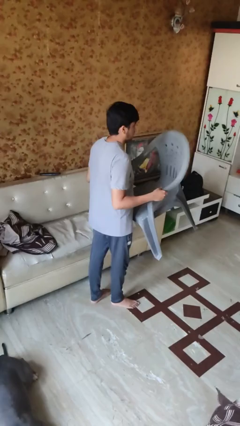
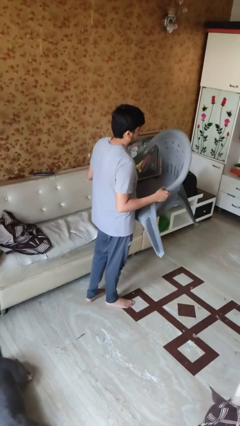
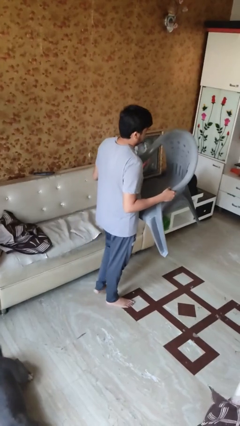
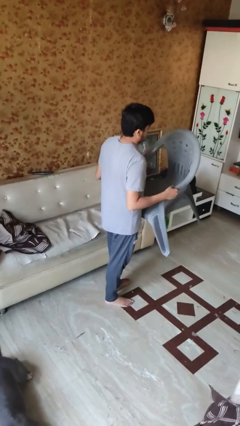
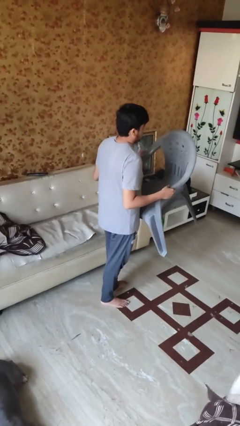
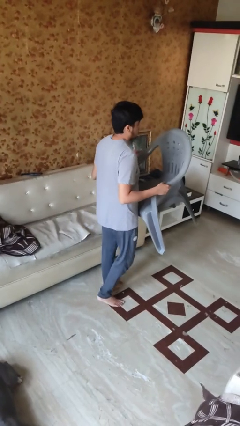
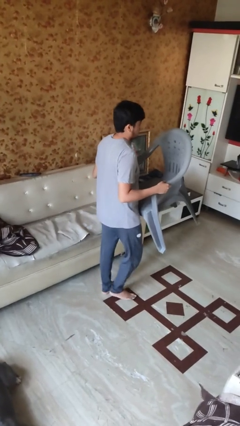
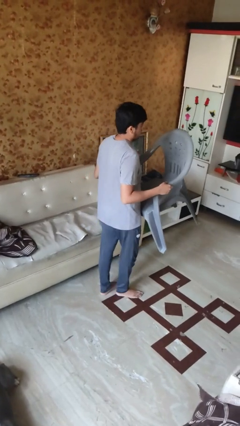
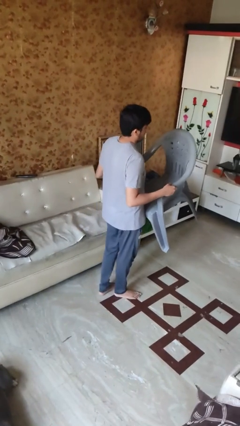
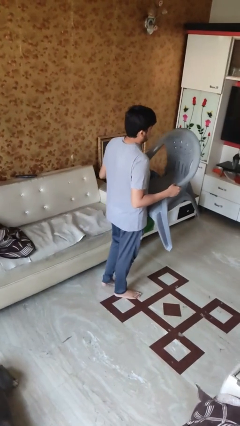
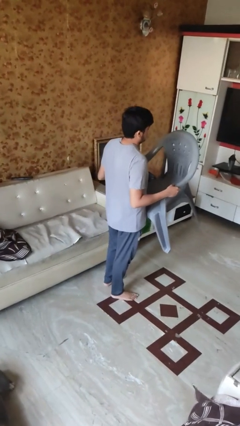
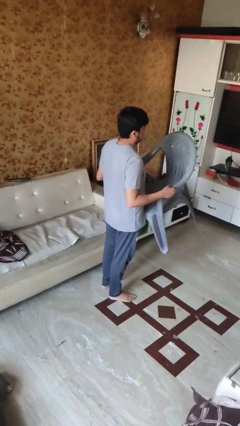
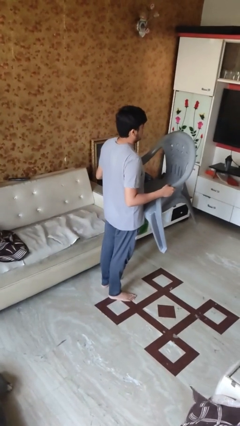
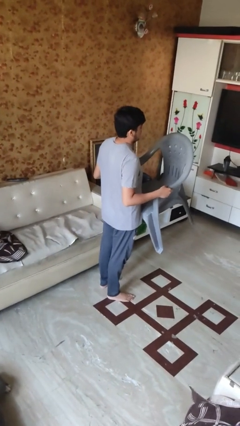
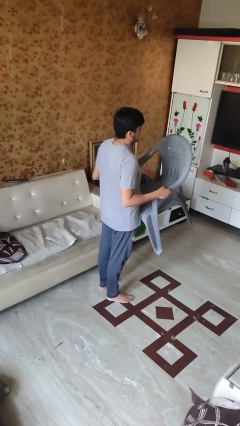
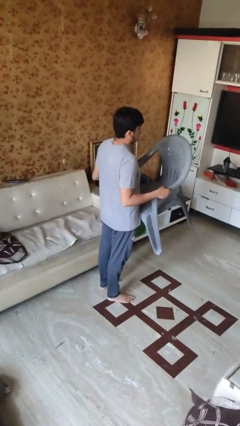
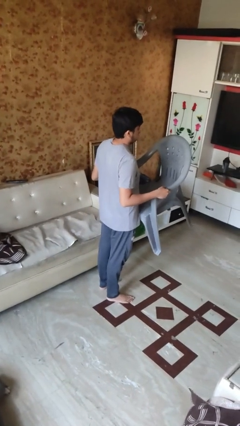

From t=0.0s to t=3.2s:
person carries furniture

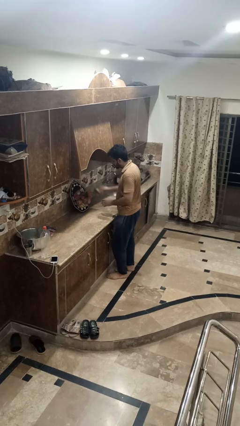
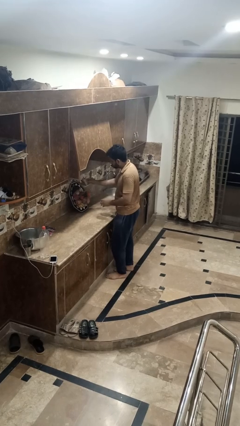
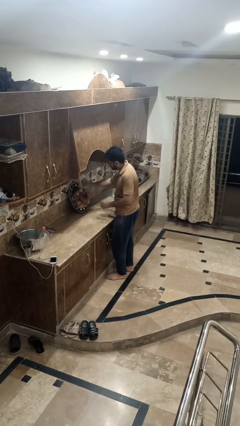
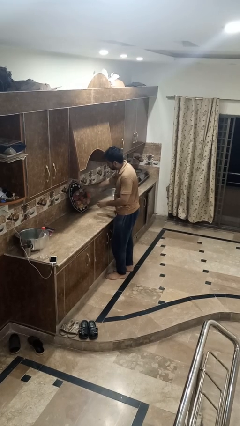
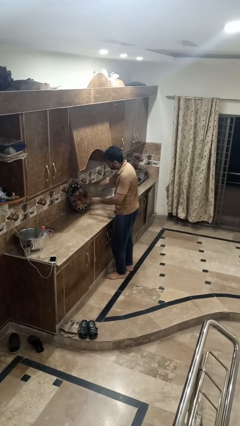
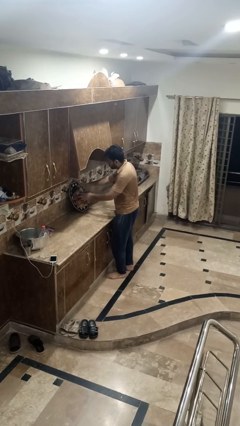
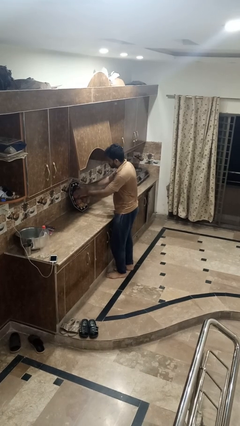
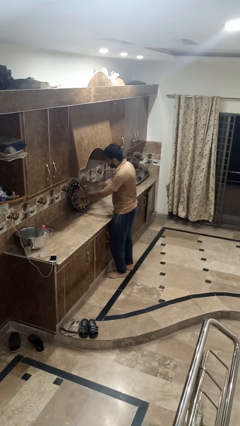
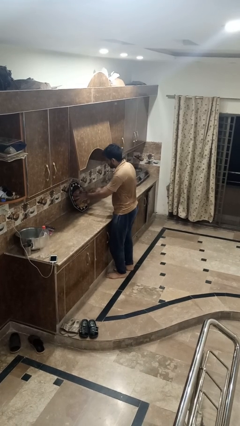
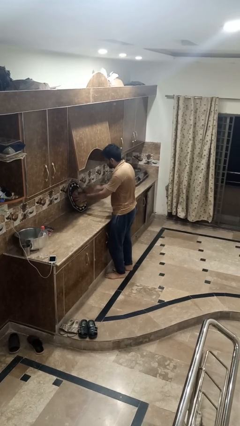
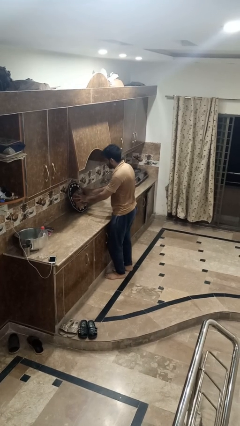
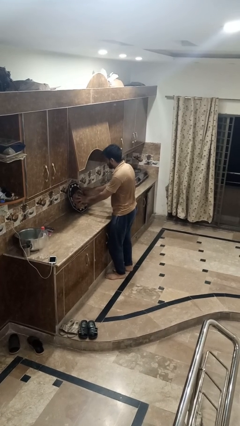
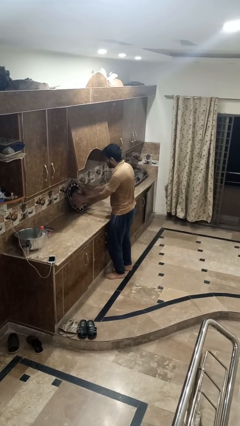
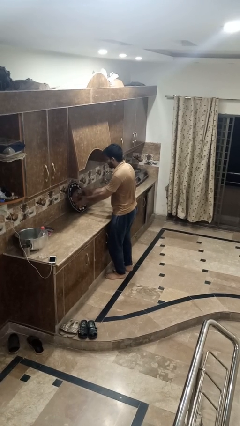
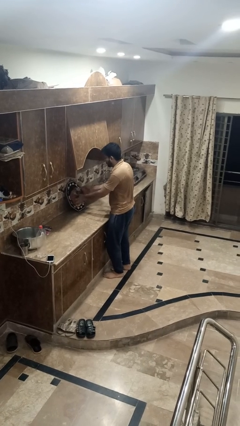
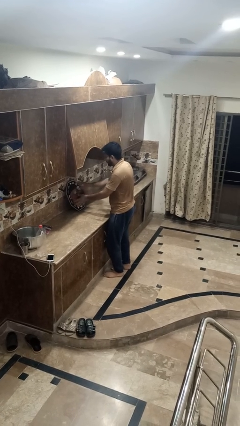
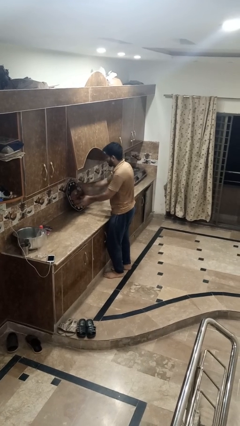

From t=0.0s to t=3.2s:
person arranges flowers in vase

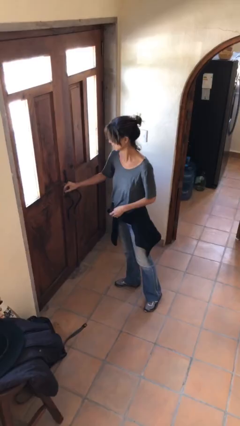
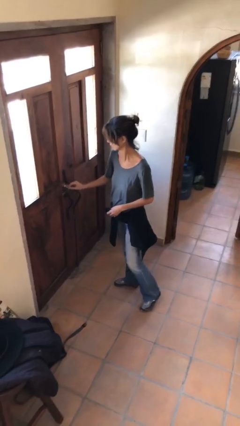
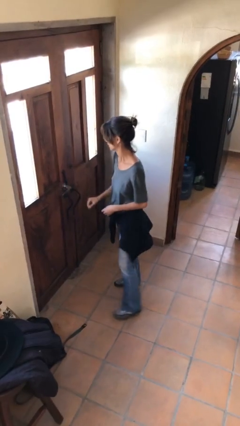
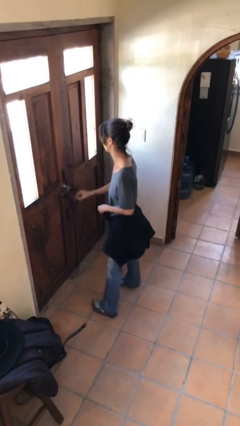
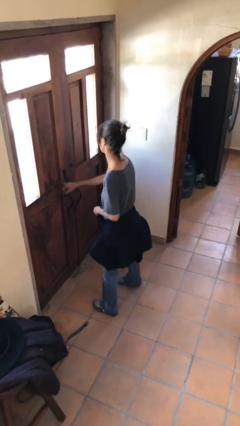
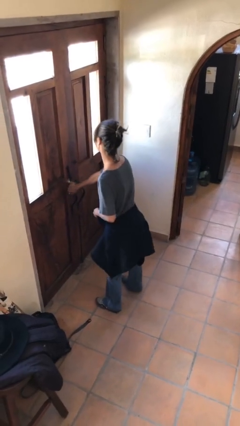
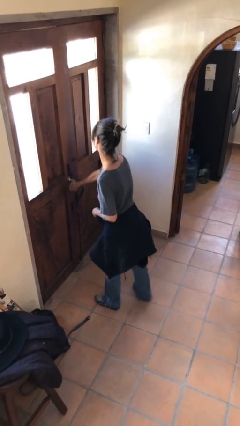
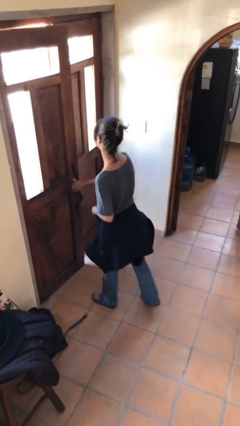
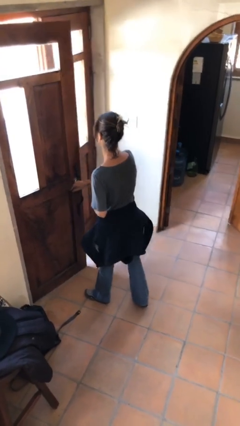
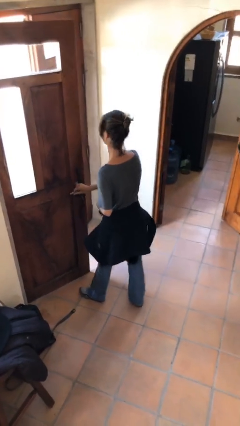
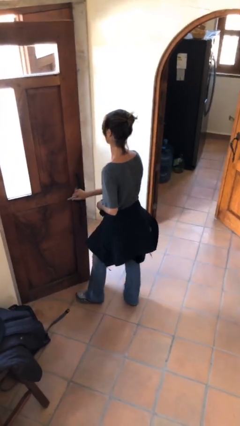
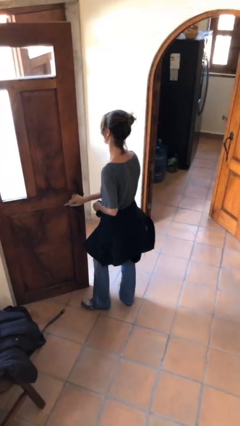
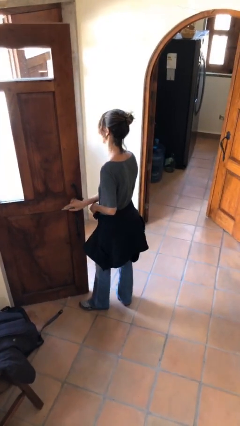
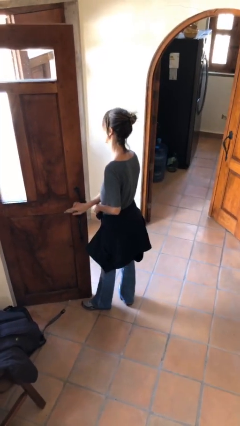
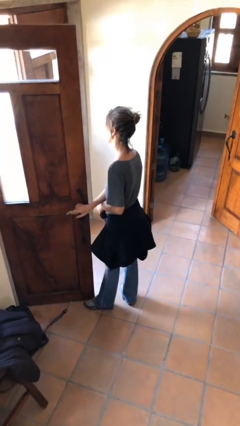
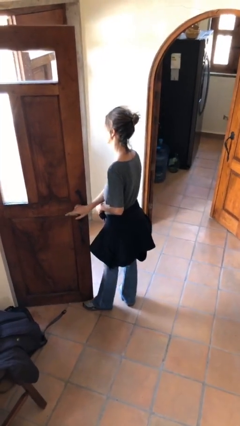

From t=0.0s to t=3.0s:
person opens facility door

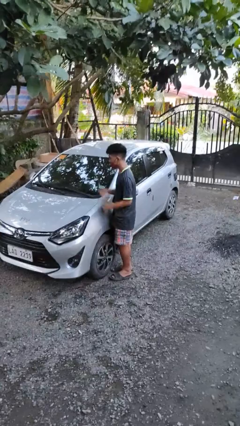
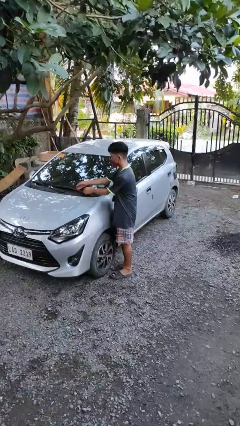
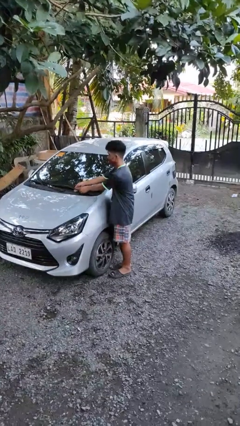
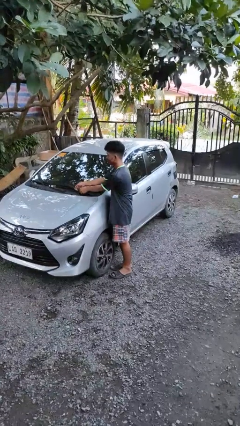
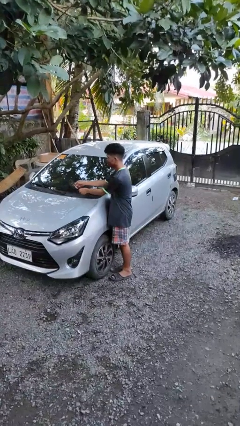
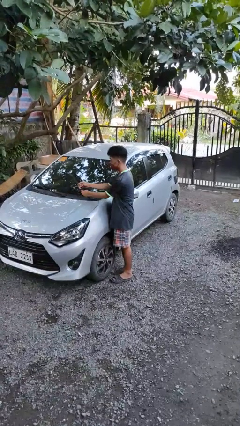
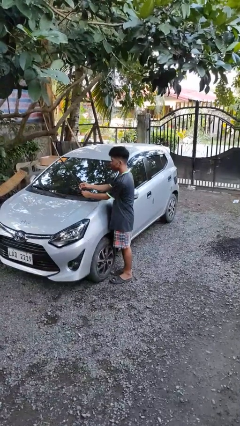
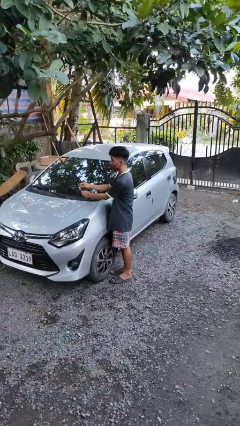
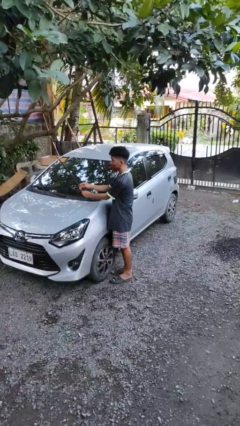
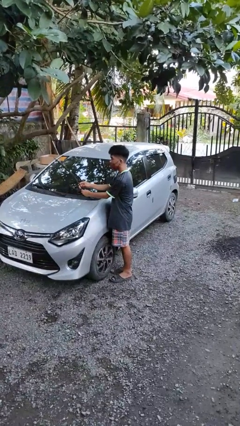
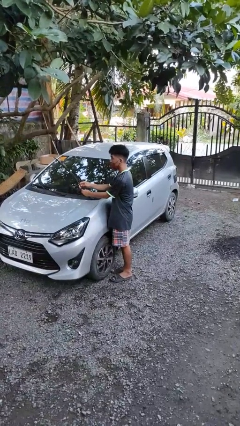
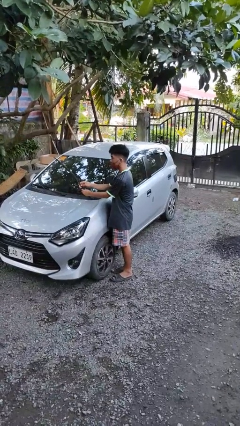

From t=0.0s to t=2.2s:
person flips up car wipers

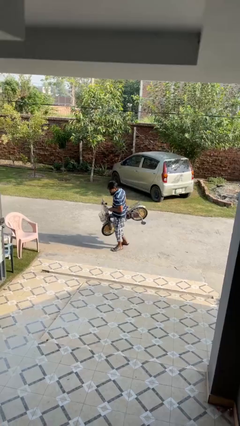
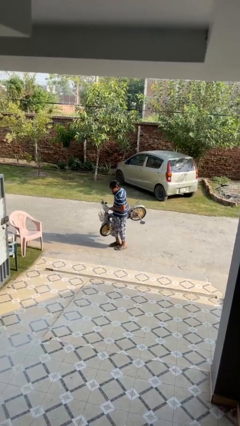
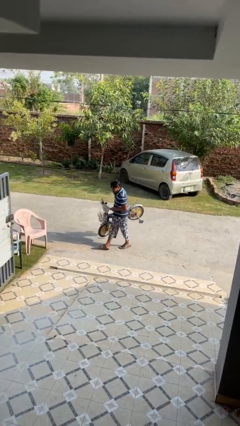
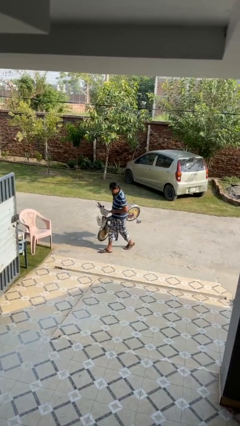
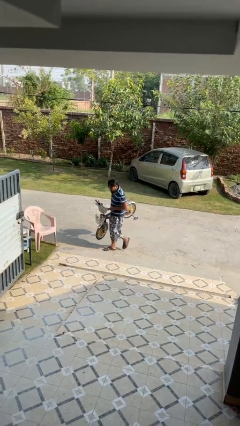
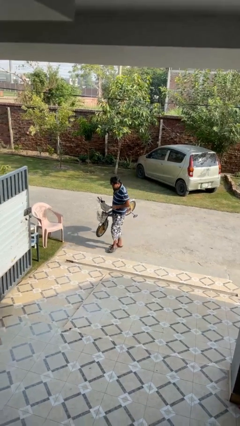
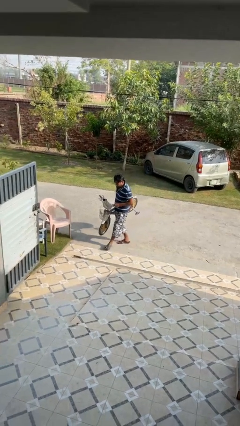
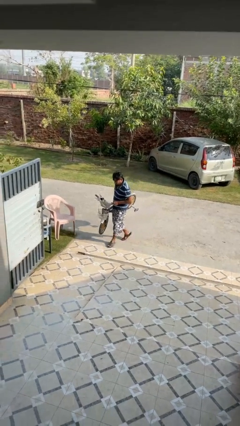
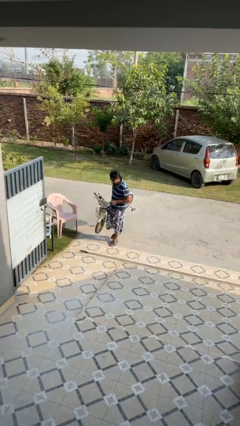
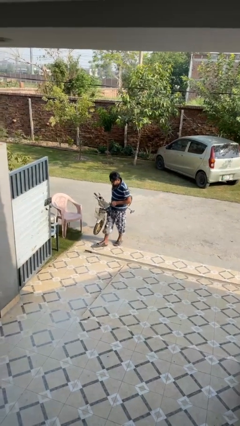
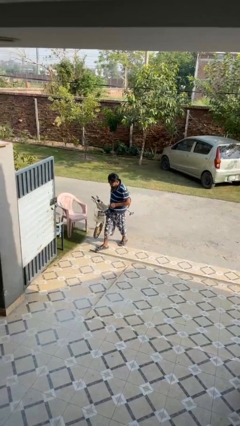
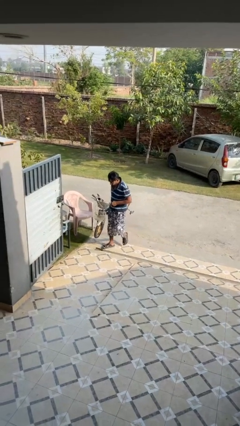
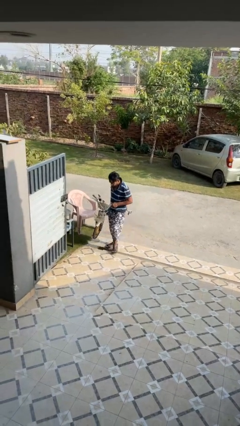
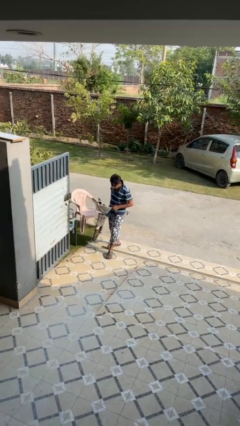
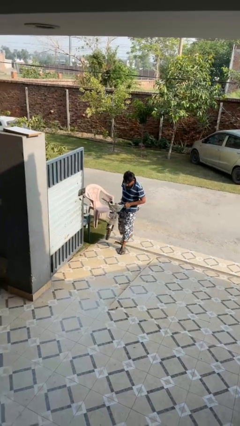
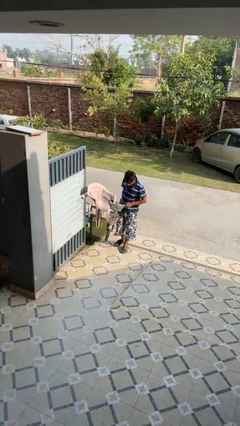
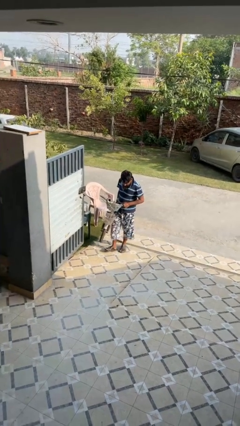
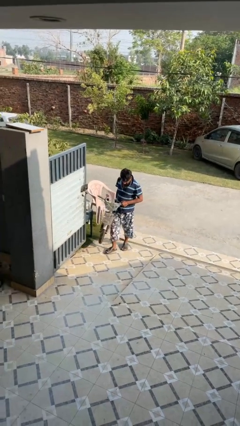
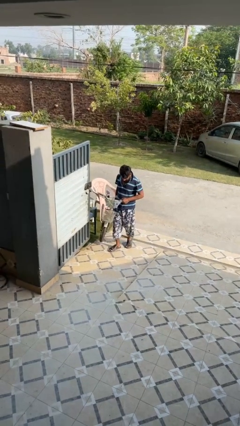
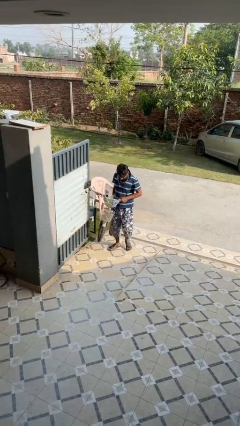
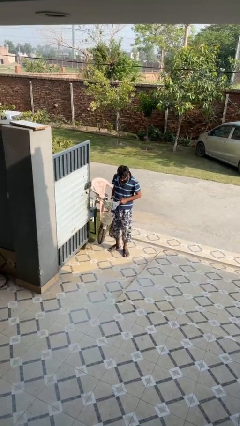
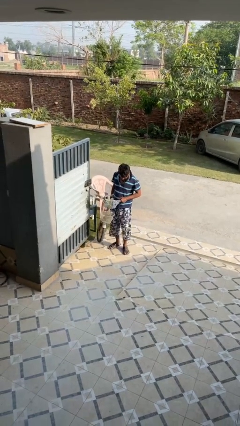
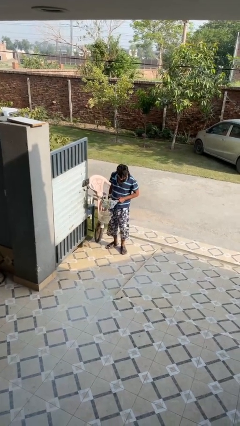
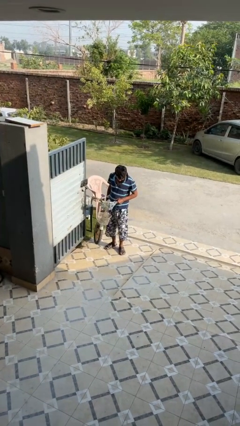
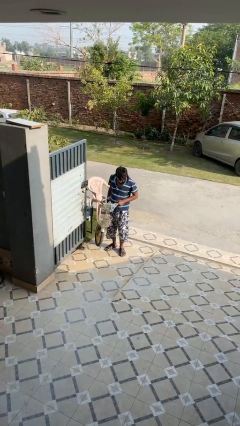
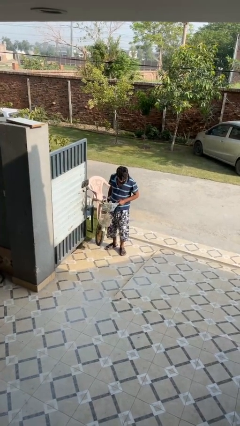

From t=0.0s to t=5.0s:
person carries bicycle

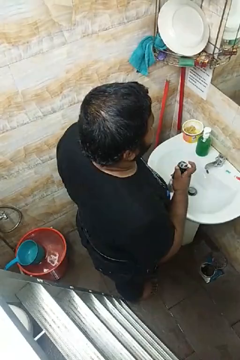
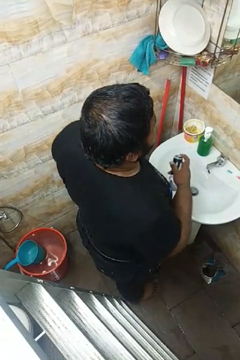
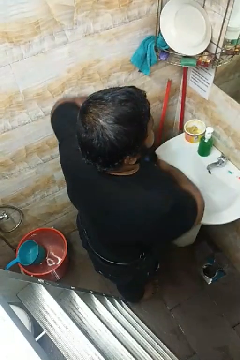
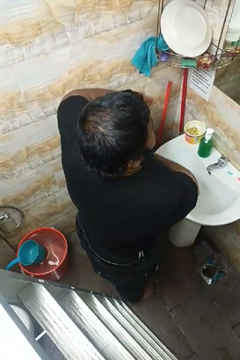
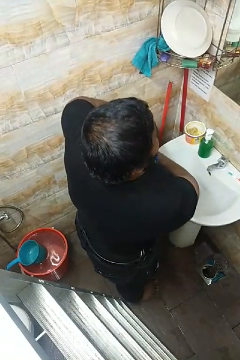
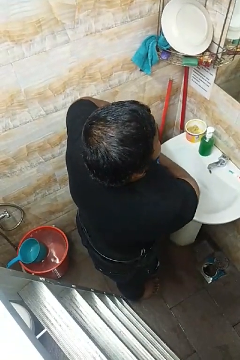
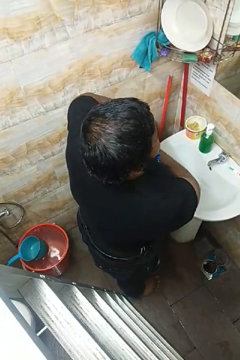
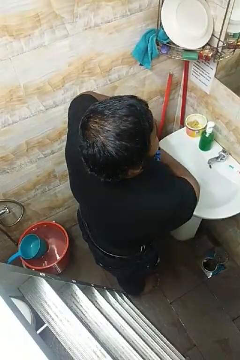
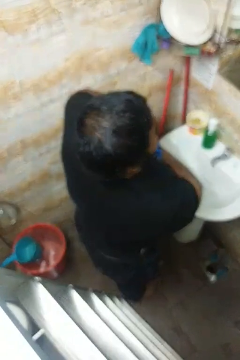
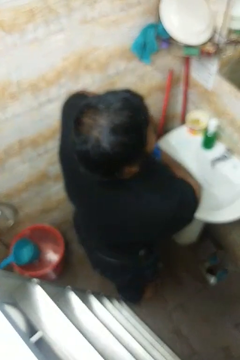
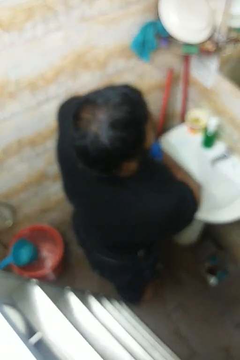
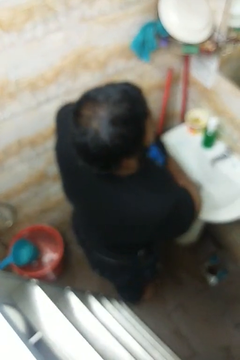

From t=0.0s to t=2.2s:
person applies deodorant
